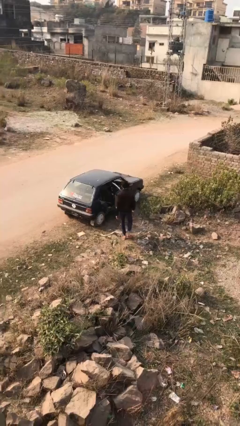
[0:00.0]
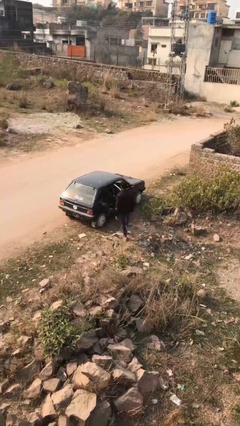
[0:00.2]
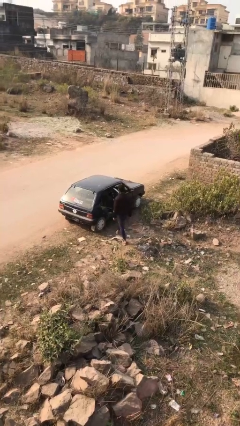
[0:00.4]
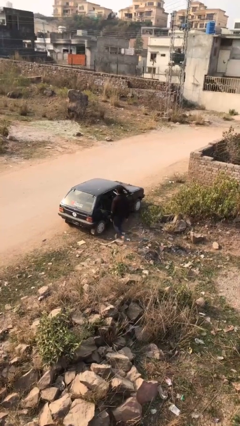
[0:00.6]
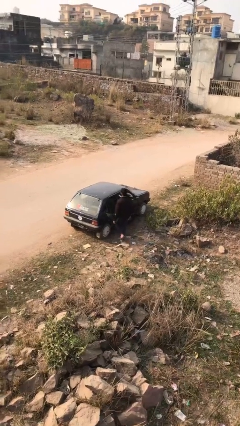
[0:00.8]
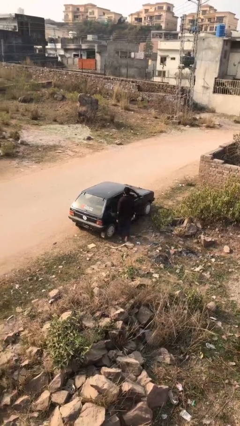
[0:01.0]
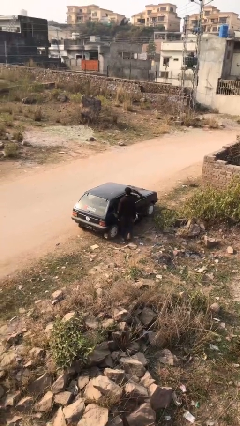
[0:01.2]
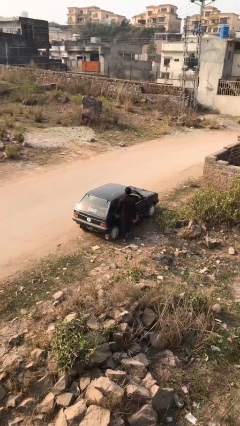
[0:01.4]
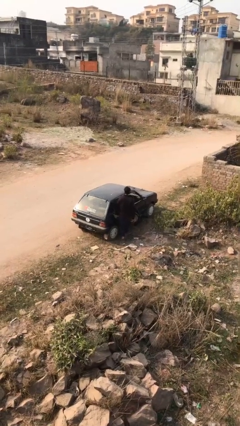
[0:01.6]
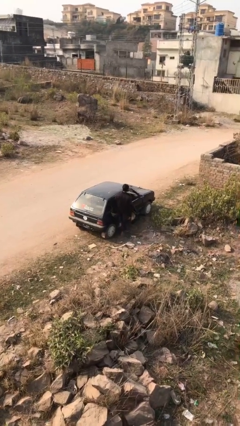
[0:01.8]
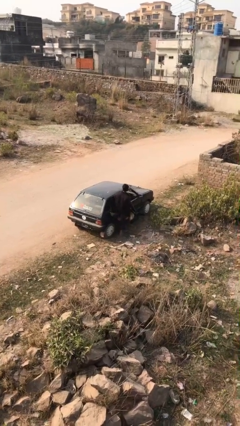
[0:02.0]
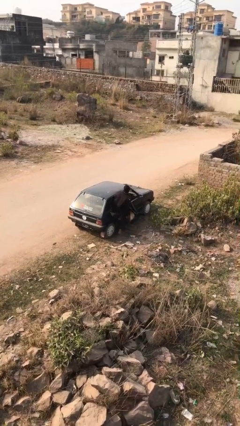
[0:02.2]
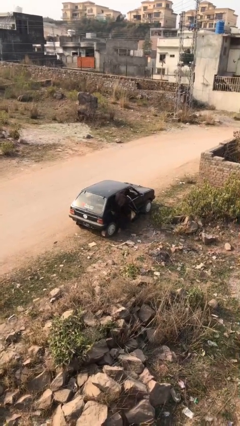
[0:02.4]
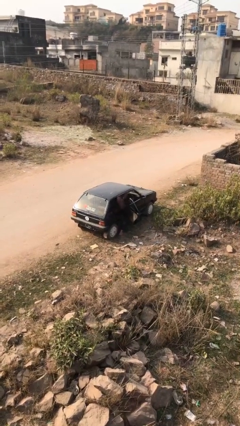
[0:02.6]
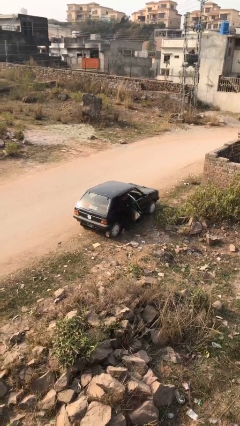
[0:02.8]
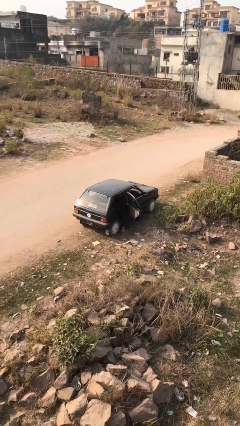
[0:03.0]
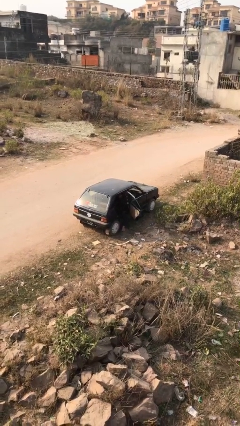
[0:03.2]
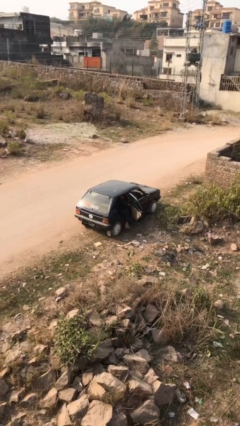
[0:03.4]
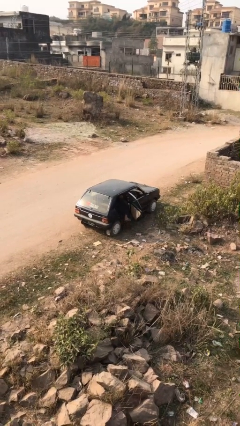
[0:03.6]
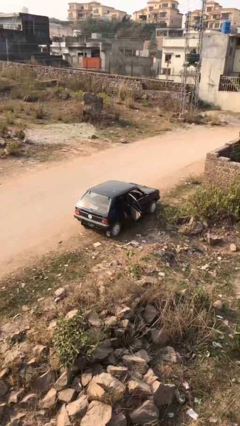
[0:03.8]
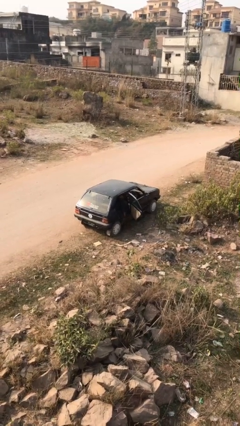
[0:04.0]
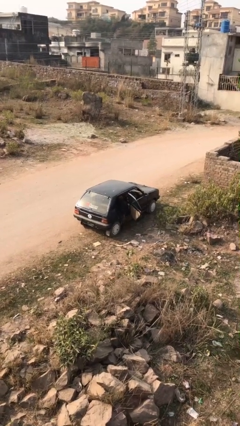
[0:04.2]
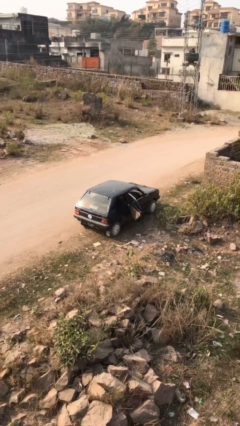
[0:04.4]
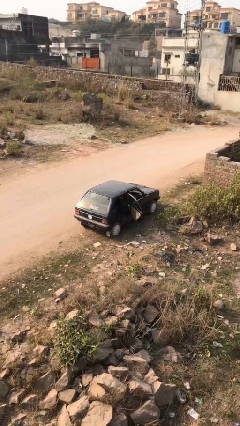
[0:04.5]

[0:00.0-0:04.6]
person enters car

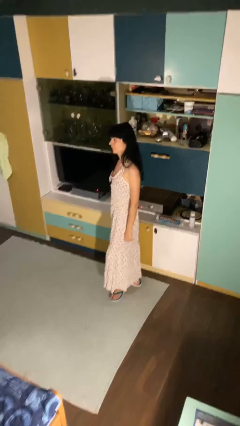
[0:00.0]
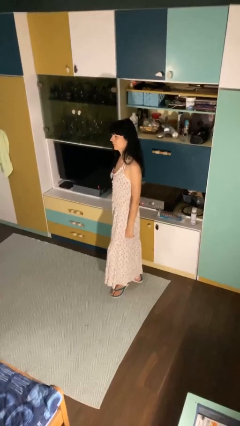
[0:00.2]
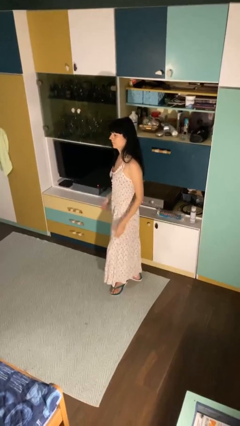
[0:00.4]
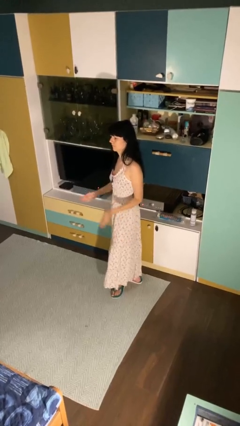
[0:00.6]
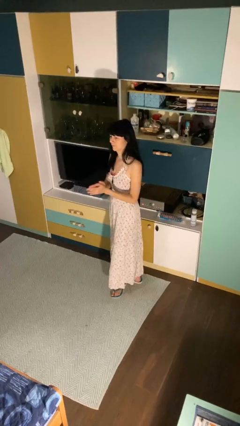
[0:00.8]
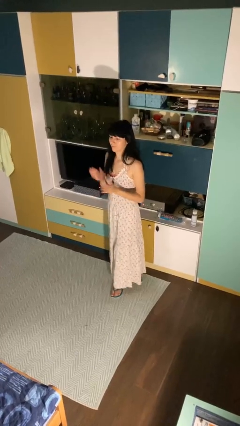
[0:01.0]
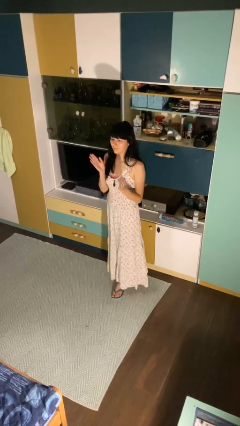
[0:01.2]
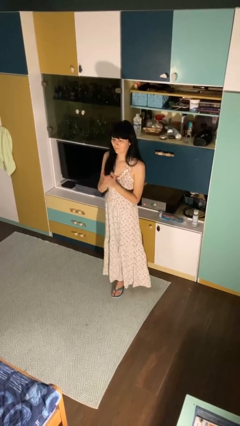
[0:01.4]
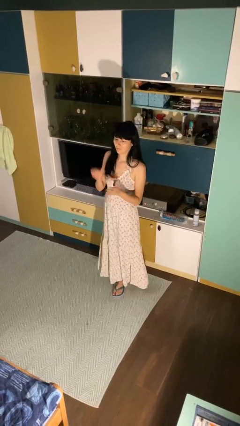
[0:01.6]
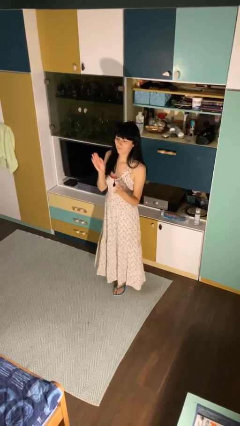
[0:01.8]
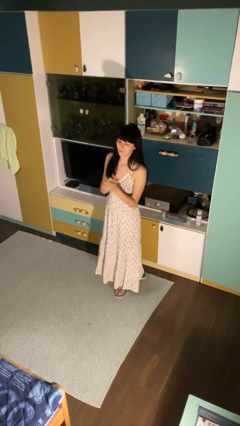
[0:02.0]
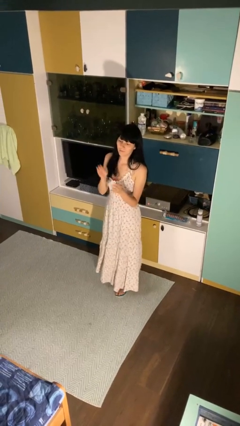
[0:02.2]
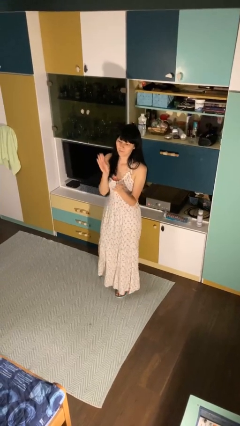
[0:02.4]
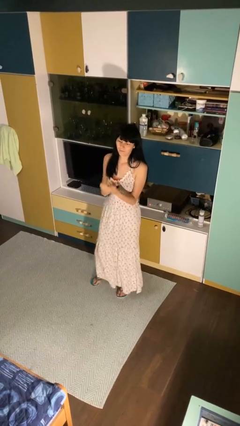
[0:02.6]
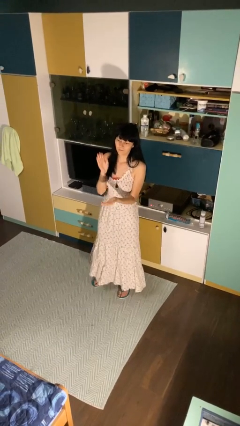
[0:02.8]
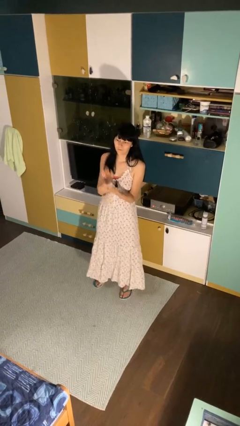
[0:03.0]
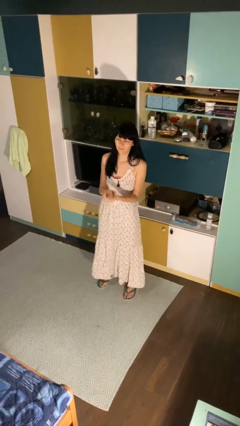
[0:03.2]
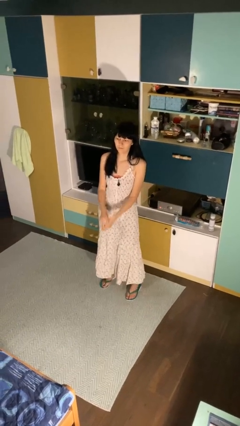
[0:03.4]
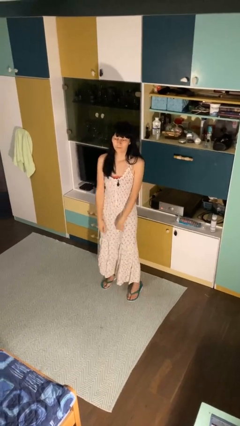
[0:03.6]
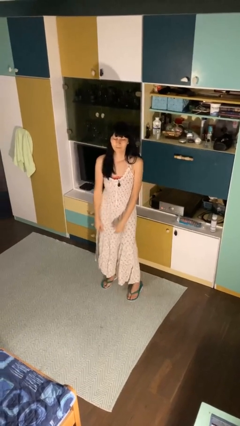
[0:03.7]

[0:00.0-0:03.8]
person claps hands

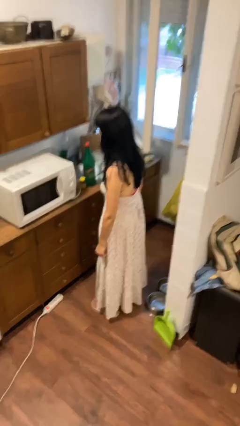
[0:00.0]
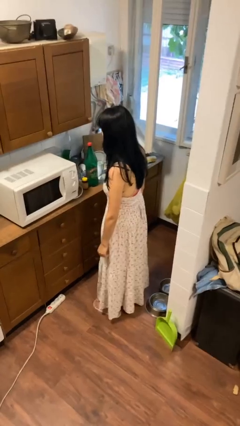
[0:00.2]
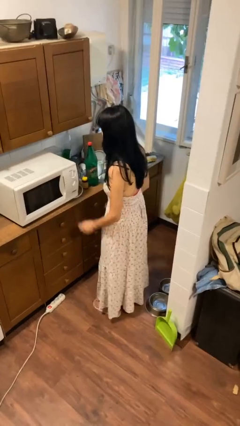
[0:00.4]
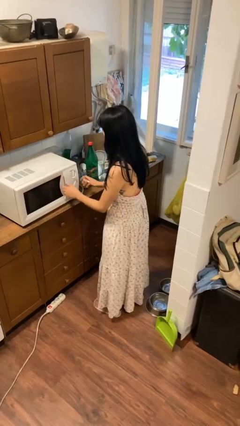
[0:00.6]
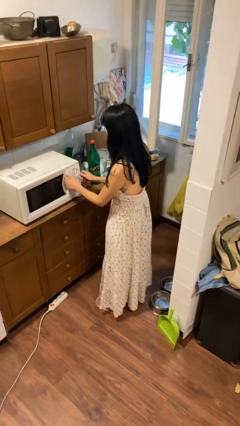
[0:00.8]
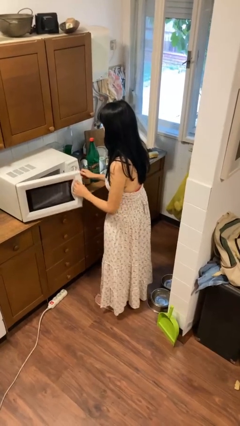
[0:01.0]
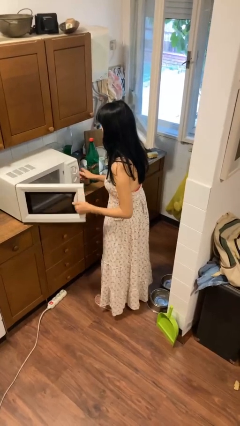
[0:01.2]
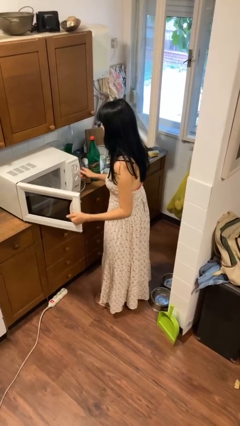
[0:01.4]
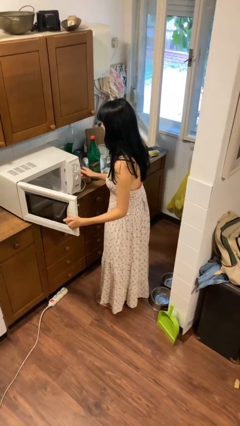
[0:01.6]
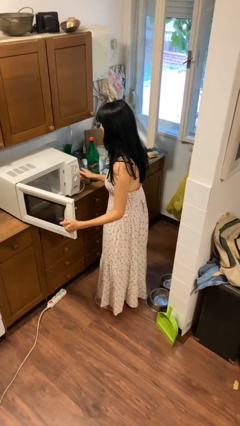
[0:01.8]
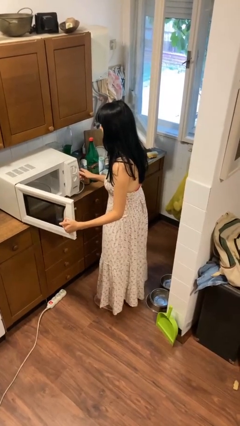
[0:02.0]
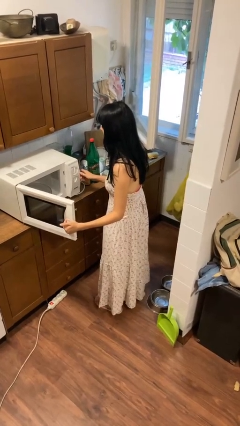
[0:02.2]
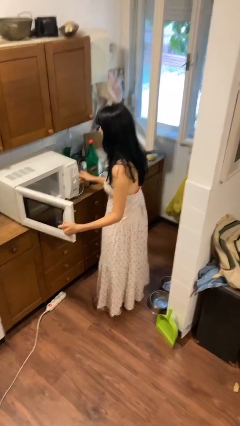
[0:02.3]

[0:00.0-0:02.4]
person opens microwave

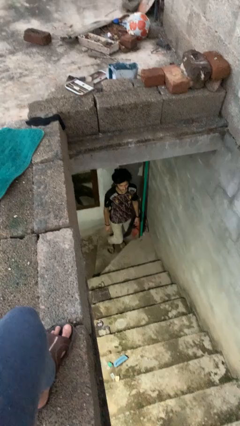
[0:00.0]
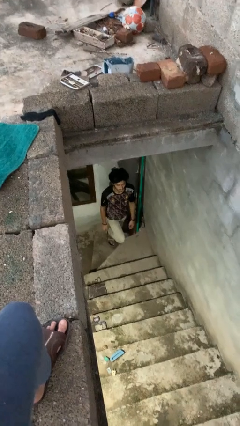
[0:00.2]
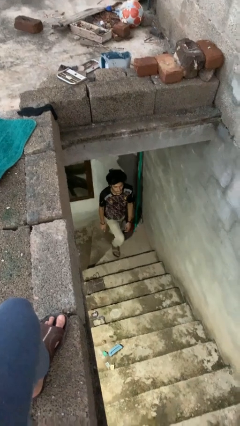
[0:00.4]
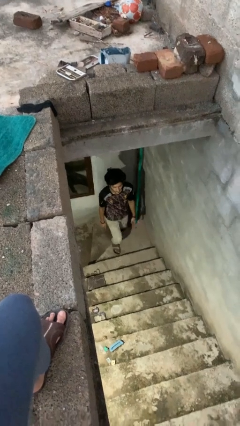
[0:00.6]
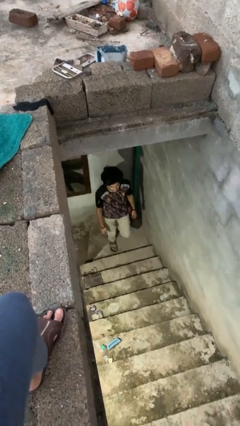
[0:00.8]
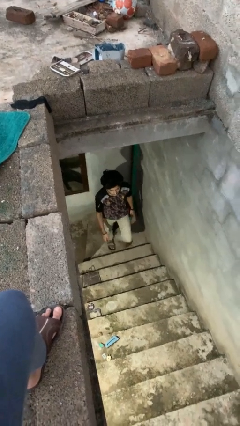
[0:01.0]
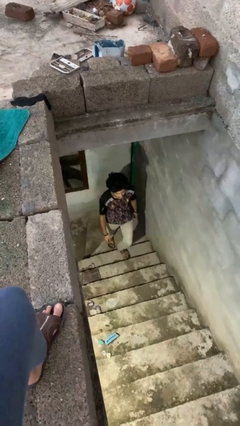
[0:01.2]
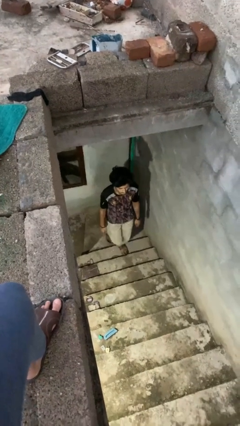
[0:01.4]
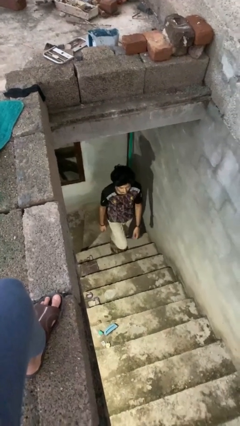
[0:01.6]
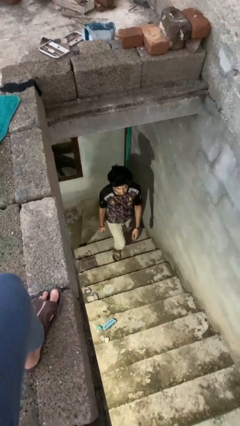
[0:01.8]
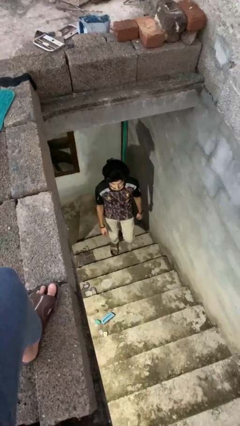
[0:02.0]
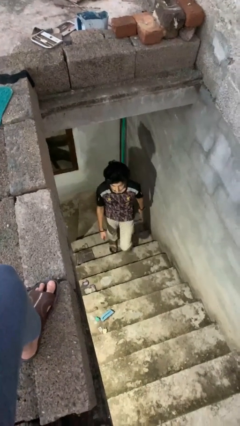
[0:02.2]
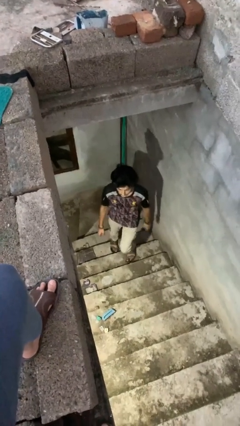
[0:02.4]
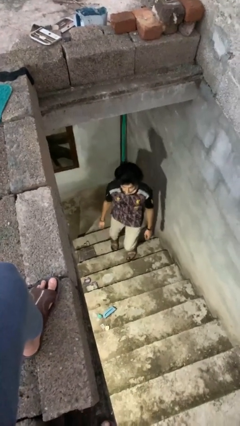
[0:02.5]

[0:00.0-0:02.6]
person climbs up stairs

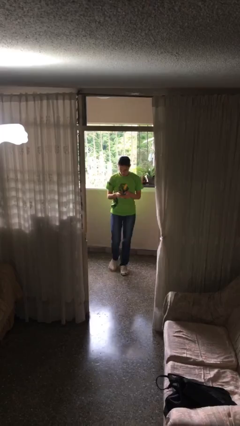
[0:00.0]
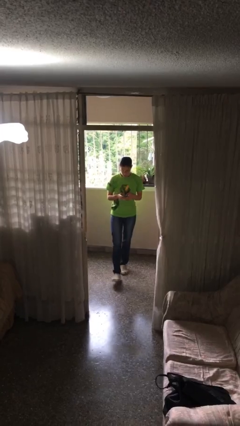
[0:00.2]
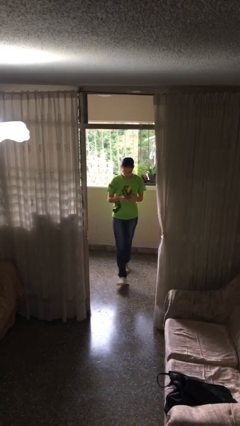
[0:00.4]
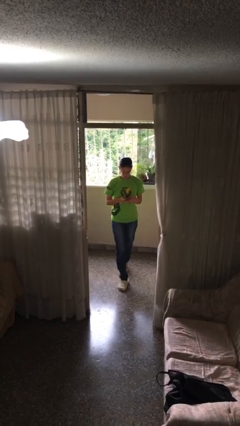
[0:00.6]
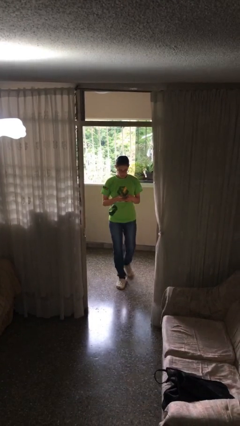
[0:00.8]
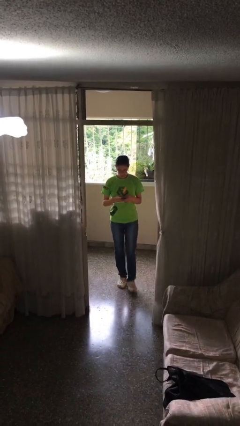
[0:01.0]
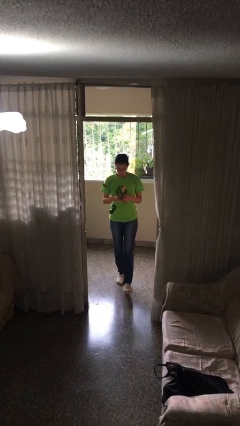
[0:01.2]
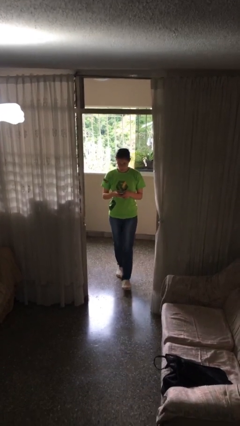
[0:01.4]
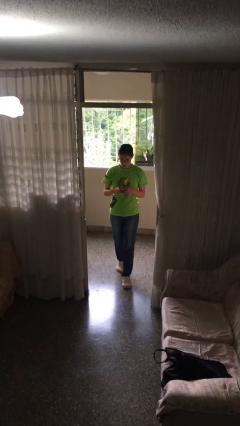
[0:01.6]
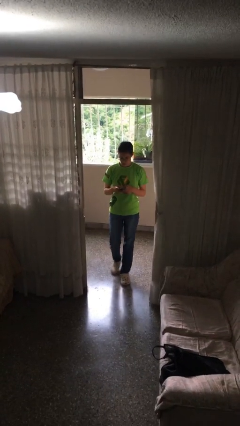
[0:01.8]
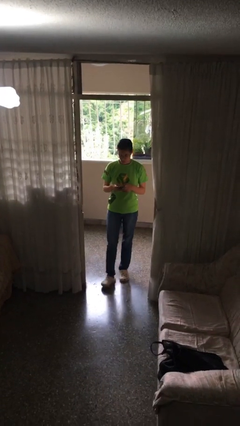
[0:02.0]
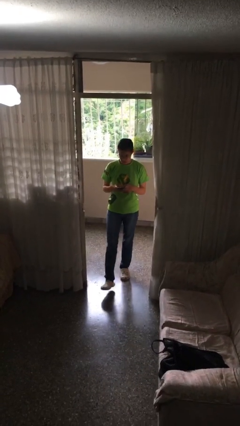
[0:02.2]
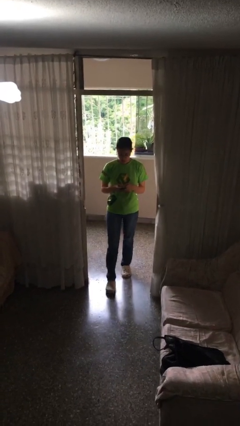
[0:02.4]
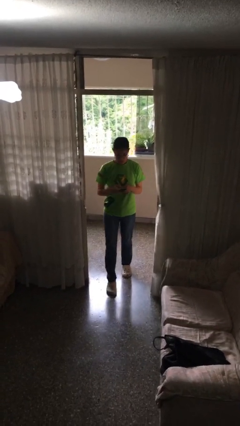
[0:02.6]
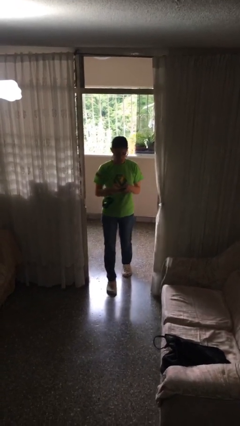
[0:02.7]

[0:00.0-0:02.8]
person texts on phone

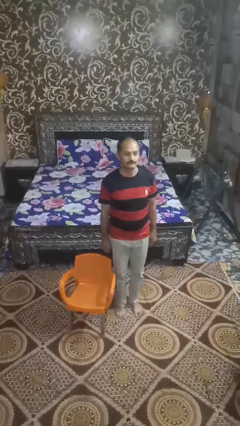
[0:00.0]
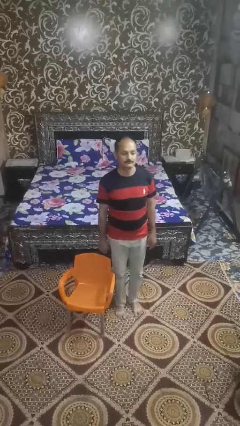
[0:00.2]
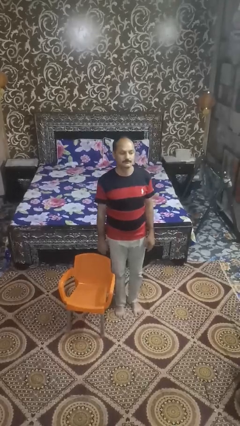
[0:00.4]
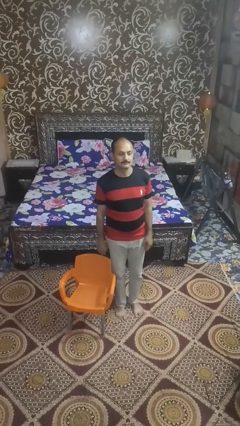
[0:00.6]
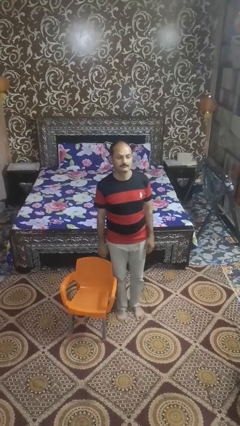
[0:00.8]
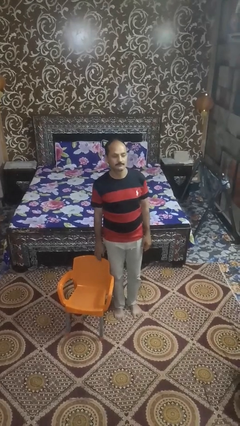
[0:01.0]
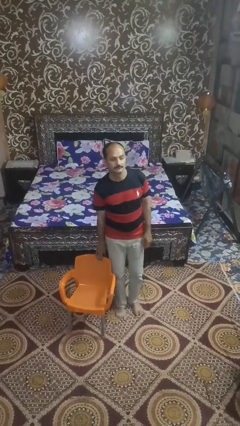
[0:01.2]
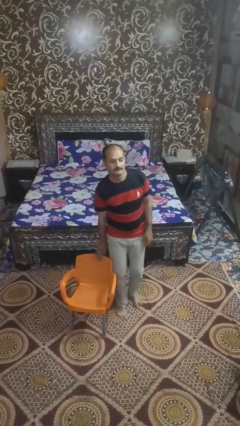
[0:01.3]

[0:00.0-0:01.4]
person stands up from floor
